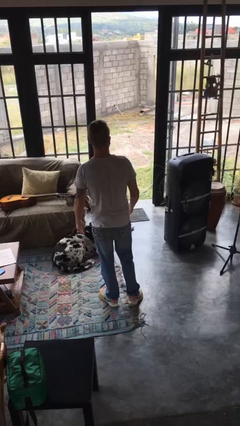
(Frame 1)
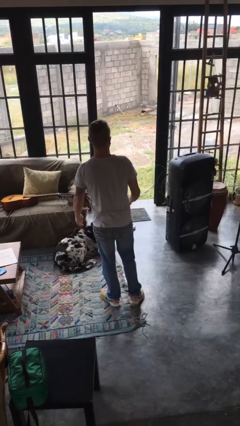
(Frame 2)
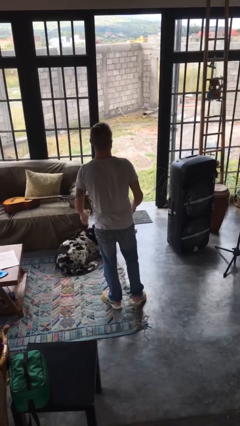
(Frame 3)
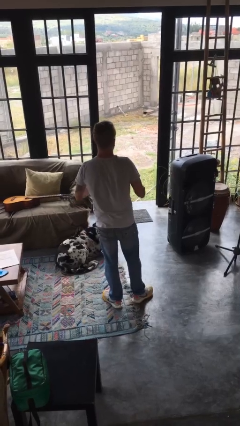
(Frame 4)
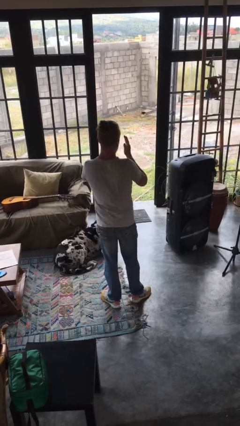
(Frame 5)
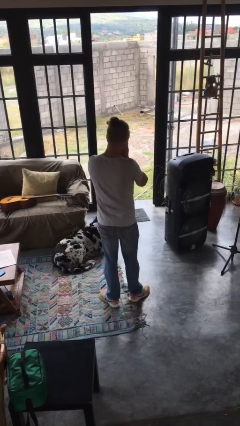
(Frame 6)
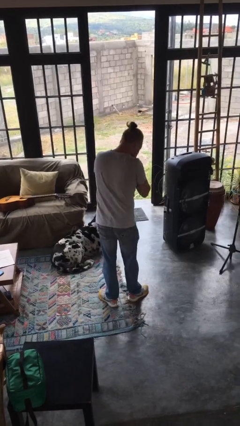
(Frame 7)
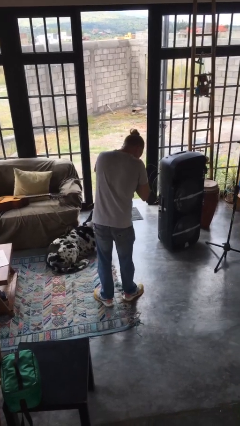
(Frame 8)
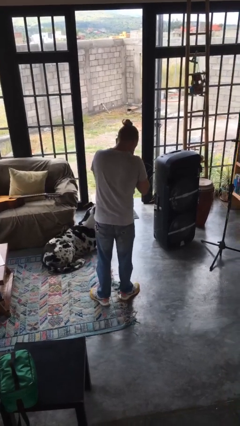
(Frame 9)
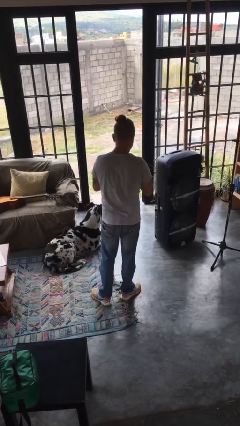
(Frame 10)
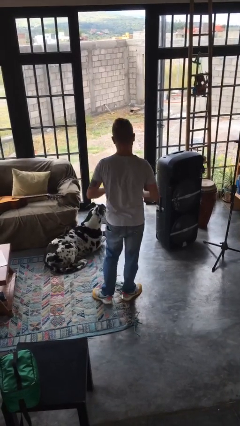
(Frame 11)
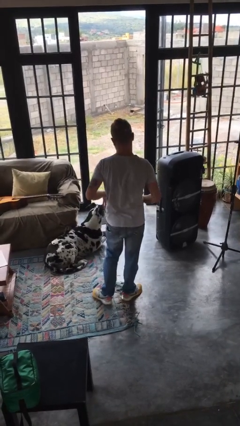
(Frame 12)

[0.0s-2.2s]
person sneezes into hand

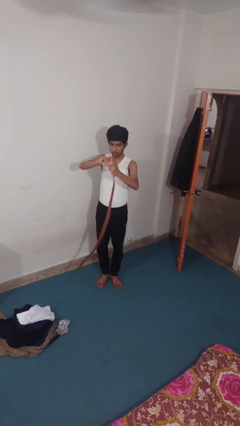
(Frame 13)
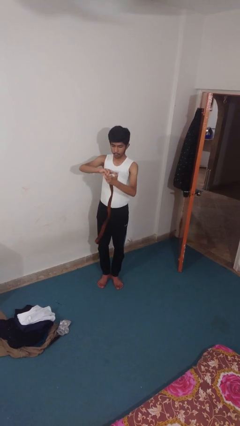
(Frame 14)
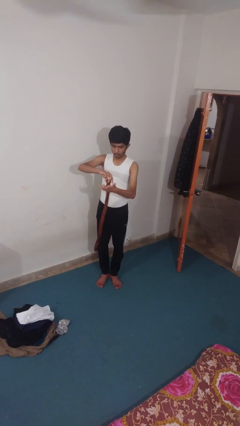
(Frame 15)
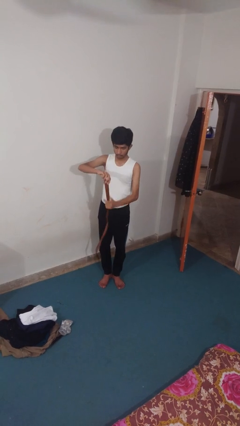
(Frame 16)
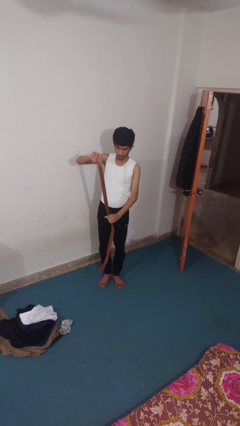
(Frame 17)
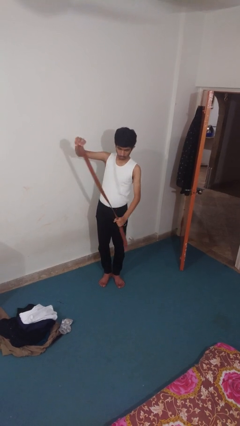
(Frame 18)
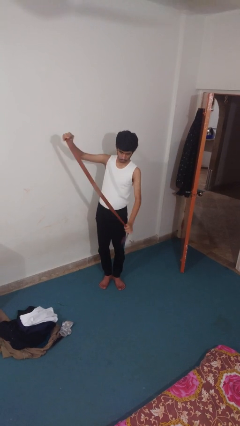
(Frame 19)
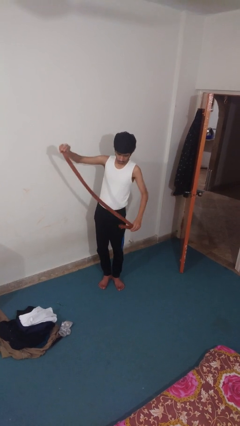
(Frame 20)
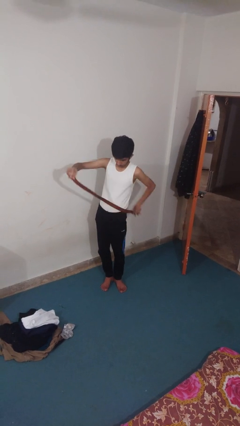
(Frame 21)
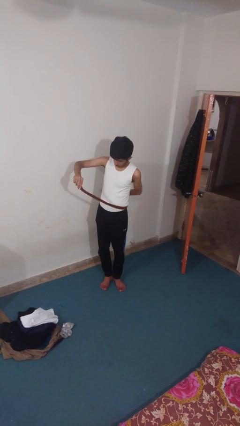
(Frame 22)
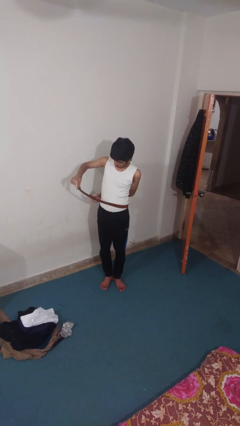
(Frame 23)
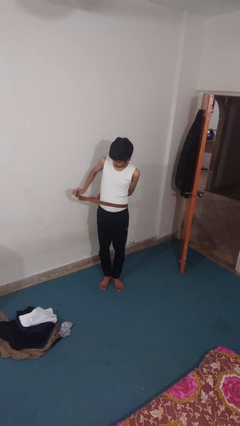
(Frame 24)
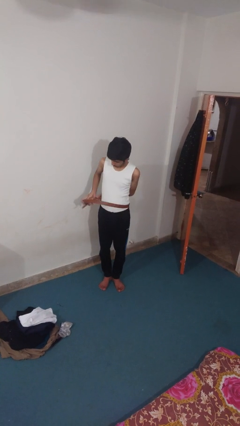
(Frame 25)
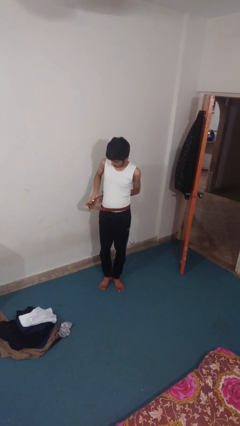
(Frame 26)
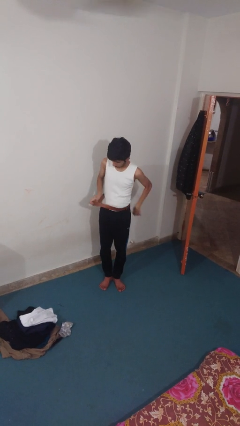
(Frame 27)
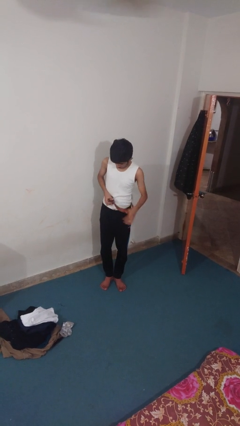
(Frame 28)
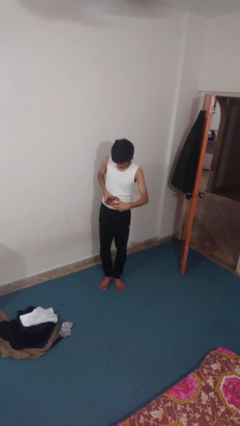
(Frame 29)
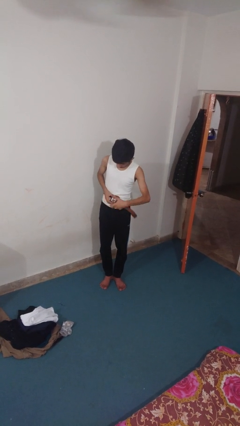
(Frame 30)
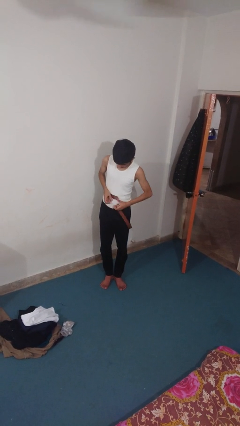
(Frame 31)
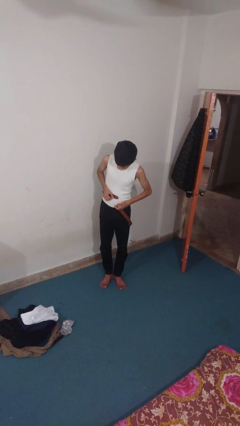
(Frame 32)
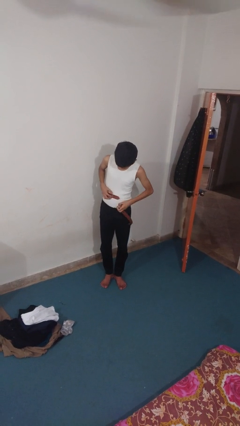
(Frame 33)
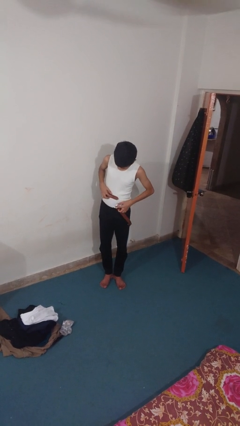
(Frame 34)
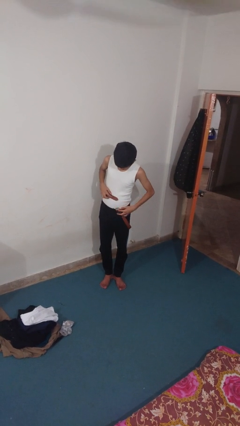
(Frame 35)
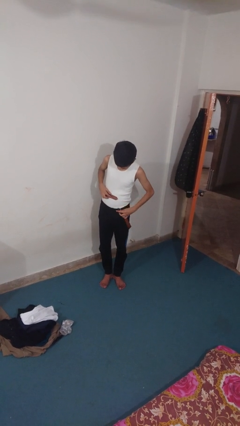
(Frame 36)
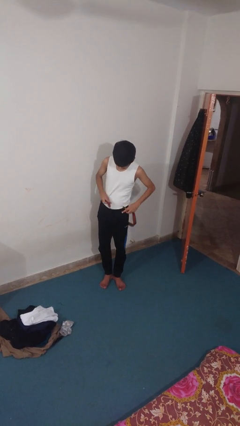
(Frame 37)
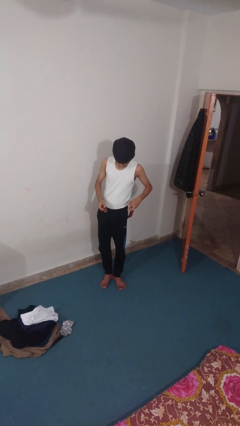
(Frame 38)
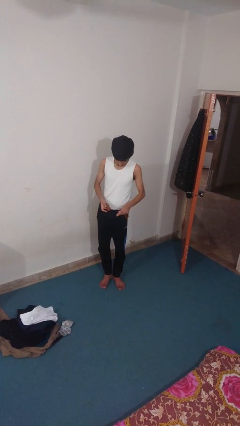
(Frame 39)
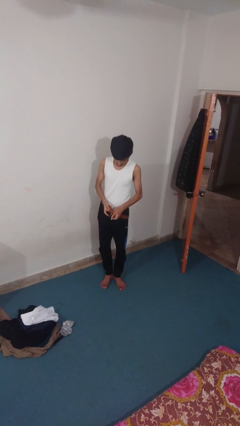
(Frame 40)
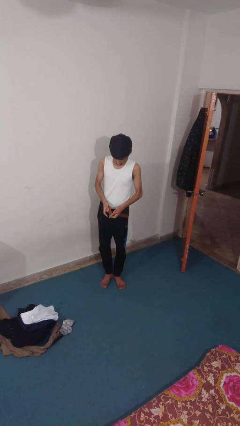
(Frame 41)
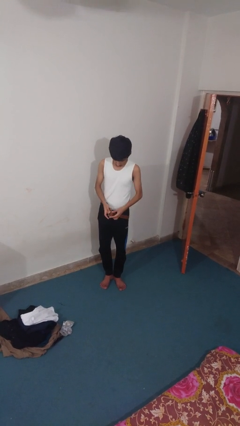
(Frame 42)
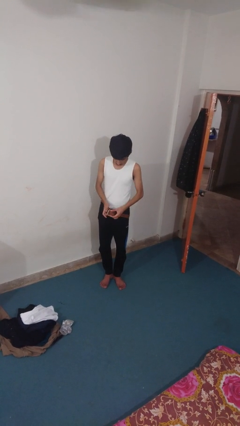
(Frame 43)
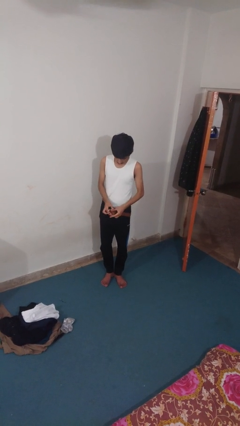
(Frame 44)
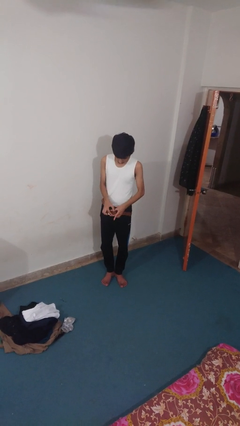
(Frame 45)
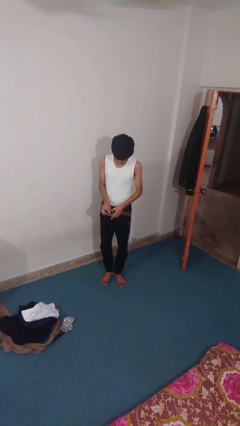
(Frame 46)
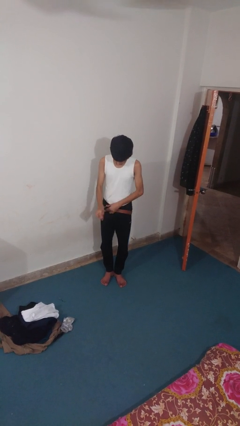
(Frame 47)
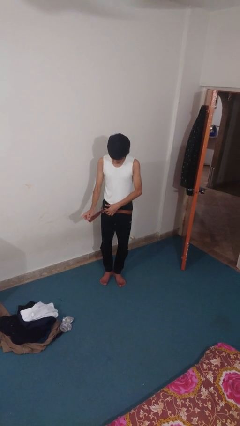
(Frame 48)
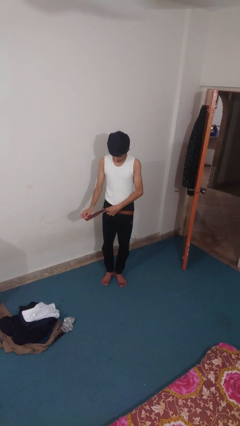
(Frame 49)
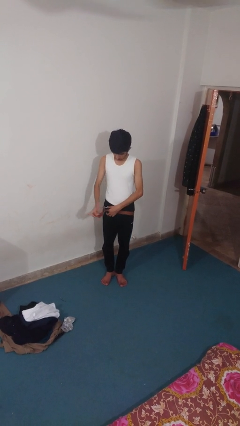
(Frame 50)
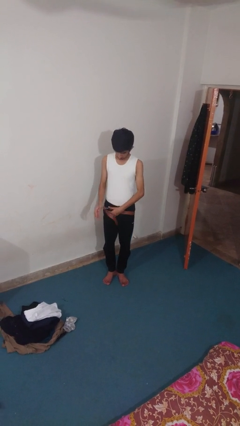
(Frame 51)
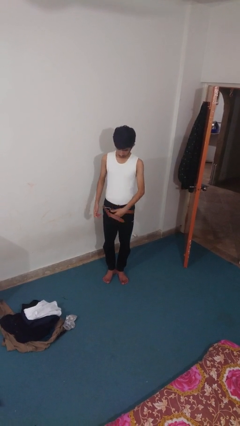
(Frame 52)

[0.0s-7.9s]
person puts on belt

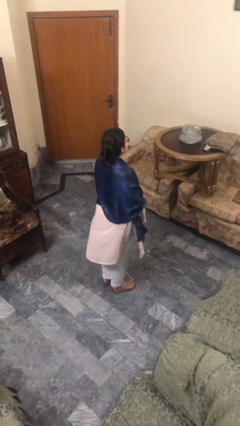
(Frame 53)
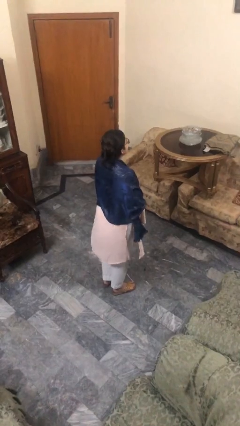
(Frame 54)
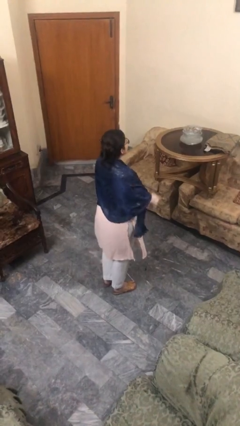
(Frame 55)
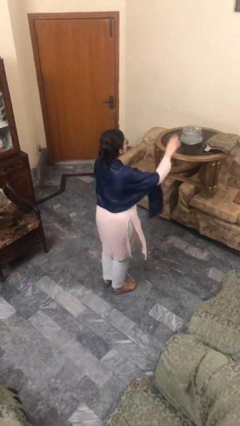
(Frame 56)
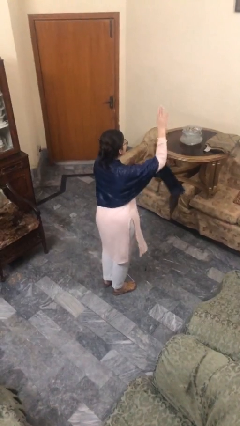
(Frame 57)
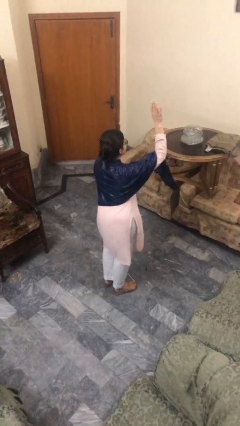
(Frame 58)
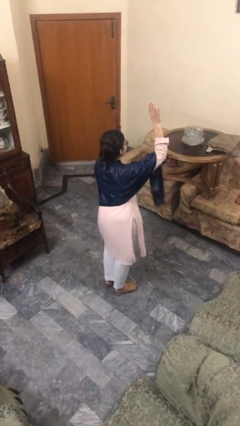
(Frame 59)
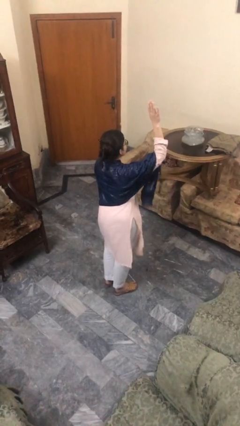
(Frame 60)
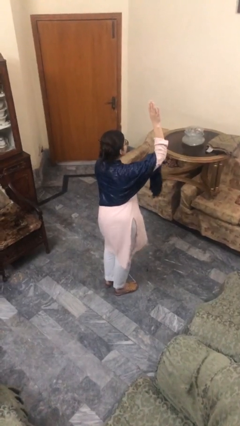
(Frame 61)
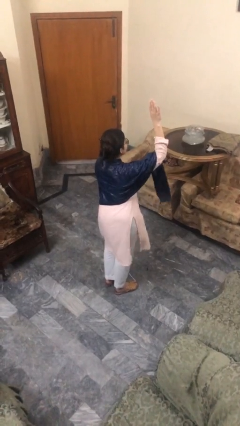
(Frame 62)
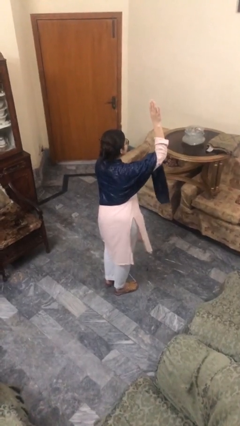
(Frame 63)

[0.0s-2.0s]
person gestures raise hand

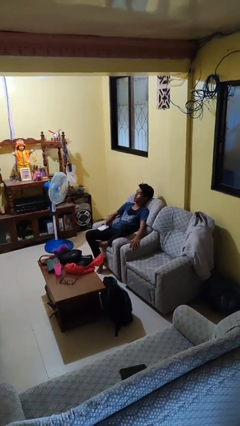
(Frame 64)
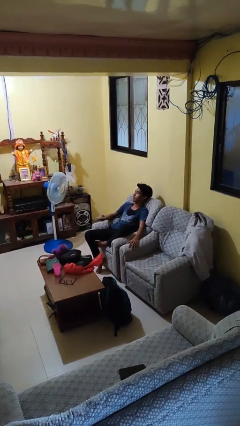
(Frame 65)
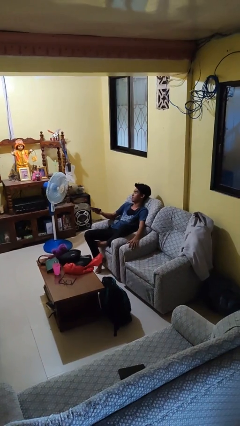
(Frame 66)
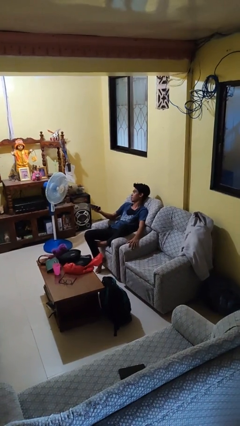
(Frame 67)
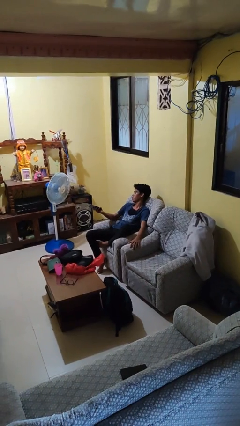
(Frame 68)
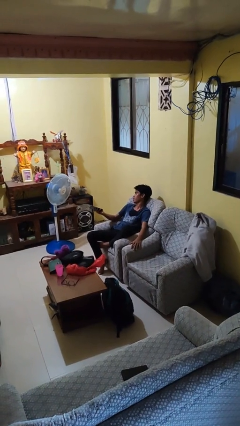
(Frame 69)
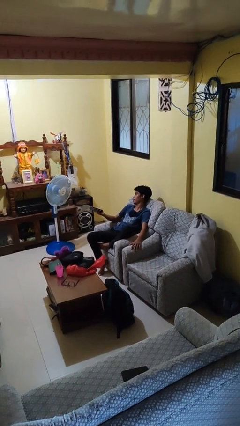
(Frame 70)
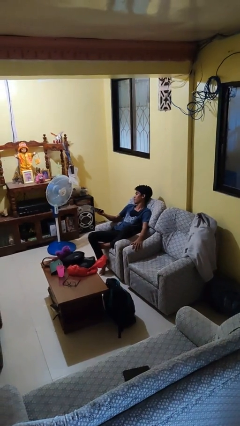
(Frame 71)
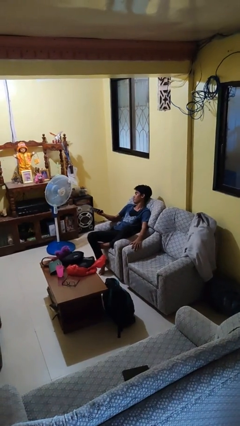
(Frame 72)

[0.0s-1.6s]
person uses television remote

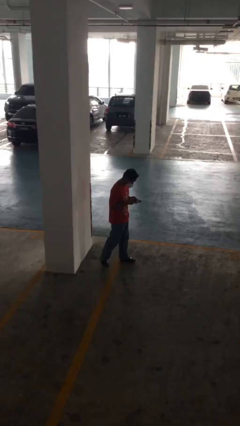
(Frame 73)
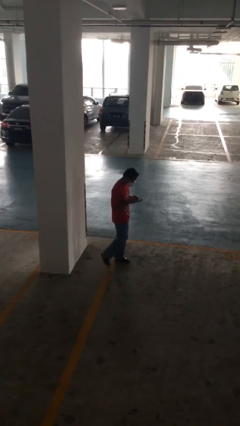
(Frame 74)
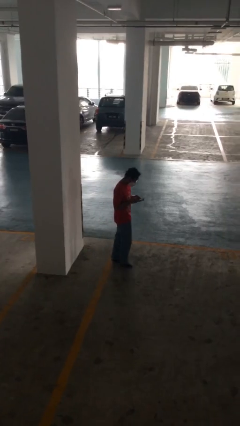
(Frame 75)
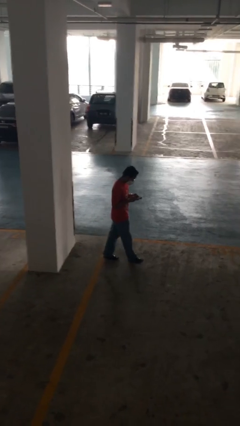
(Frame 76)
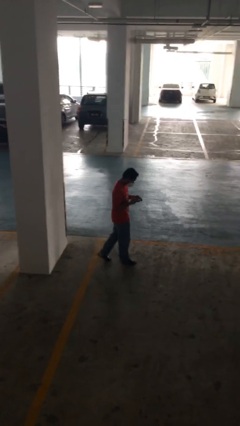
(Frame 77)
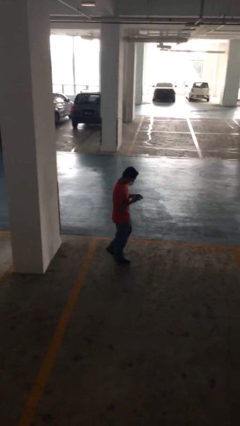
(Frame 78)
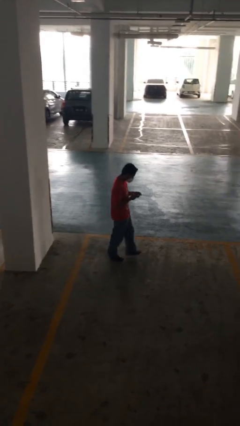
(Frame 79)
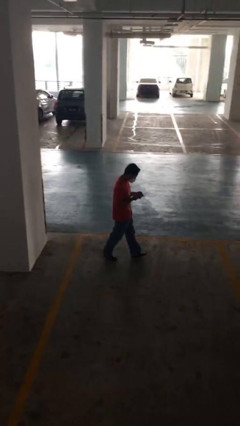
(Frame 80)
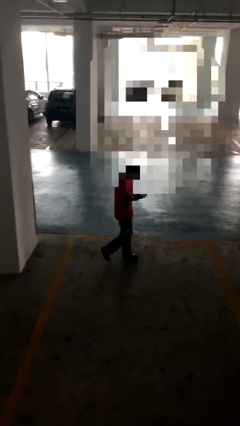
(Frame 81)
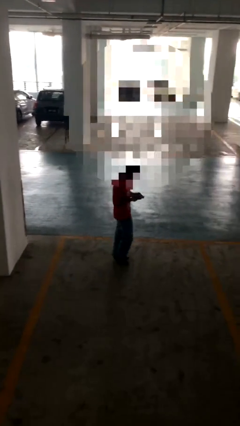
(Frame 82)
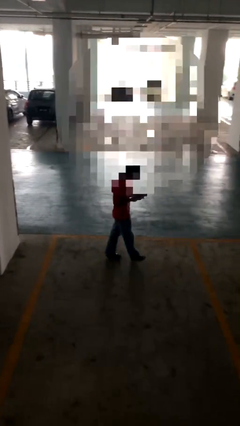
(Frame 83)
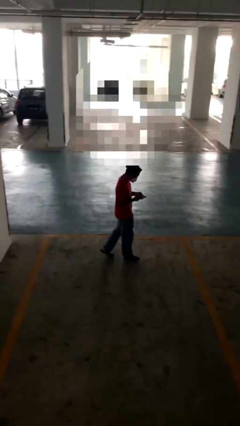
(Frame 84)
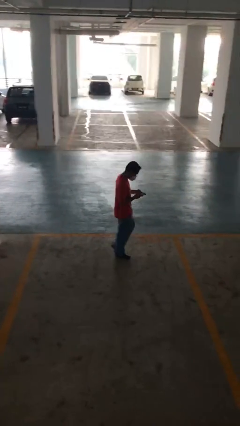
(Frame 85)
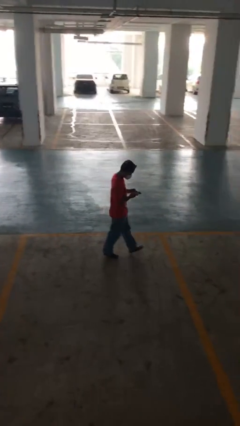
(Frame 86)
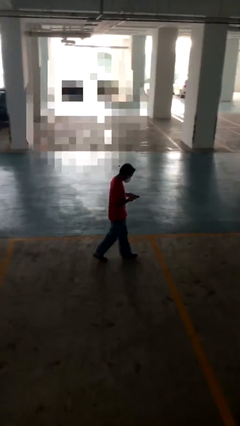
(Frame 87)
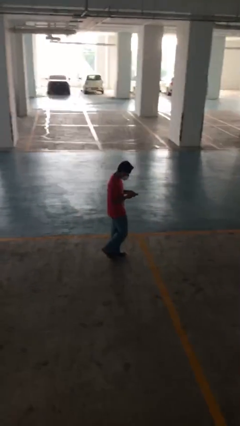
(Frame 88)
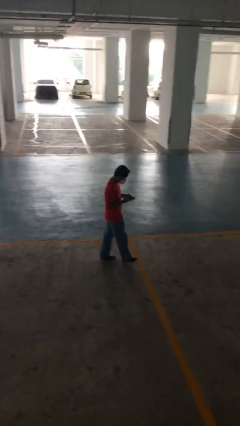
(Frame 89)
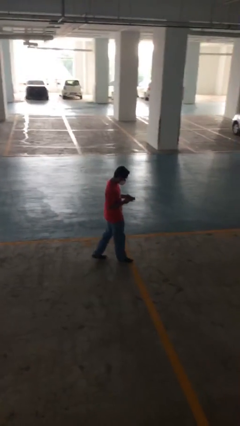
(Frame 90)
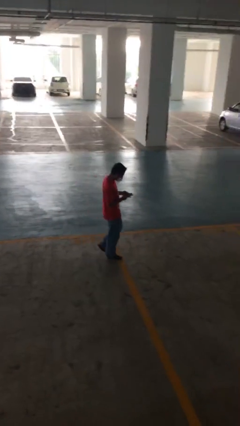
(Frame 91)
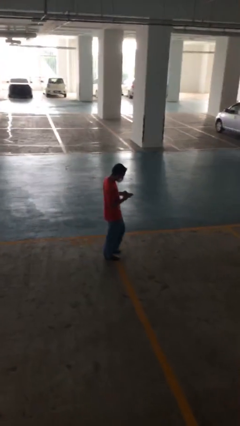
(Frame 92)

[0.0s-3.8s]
person texts on phone
